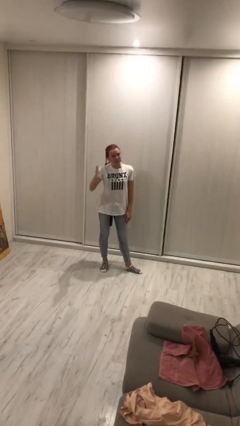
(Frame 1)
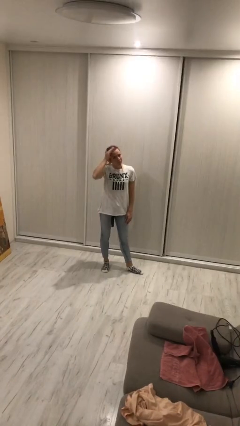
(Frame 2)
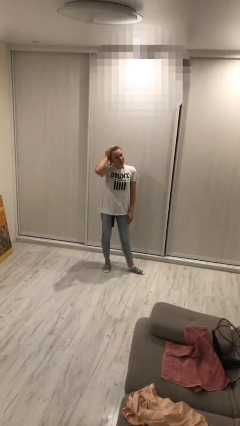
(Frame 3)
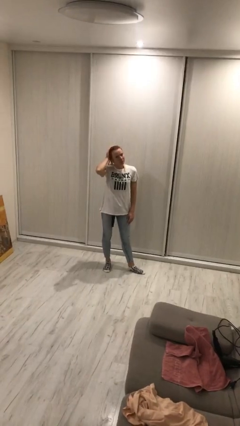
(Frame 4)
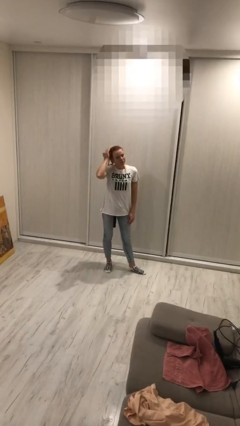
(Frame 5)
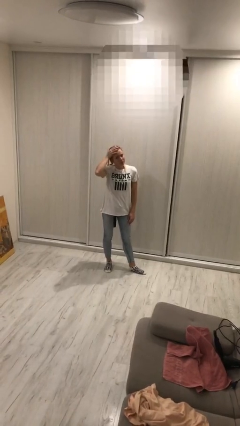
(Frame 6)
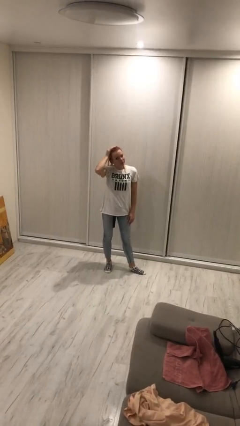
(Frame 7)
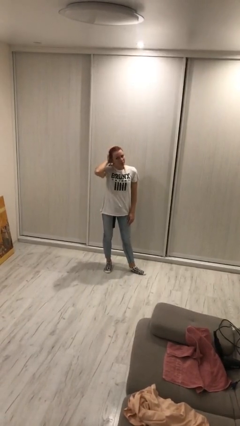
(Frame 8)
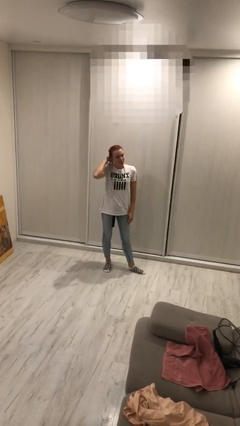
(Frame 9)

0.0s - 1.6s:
person pats head

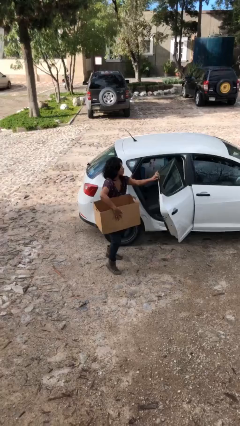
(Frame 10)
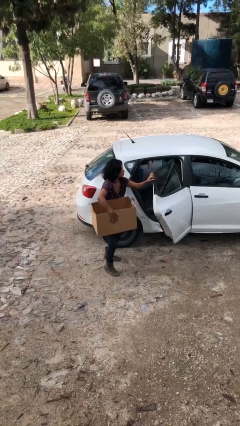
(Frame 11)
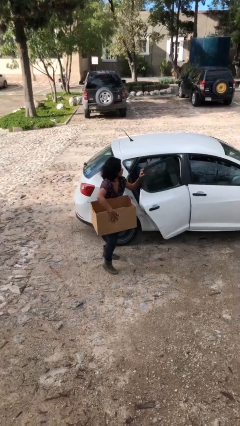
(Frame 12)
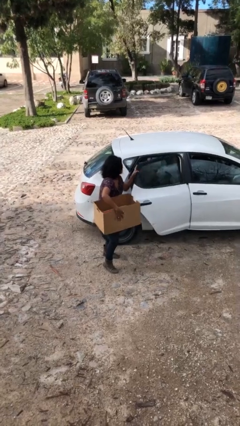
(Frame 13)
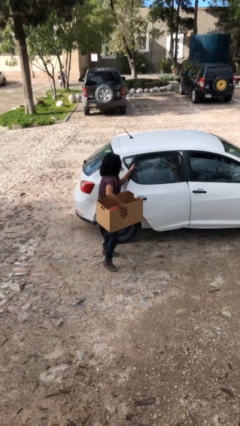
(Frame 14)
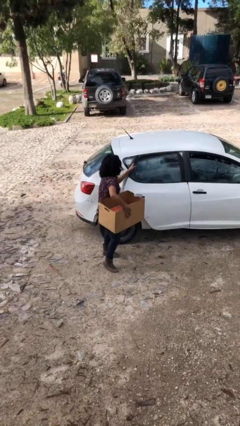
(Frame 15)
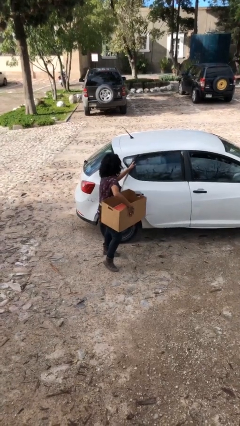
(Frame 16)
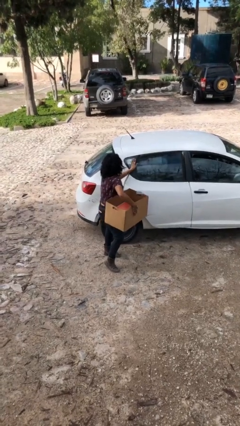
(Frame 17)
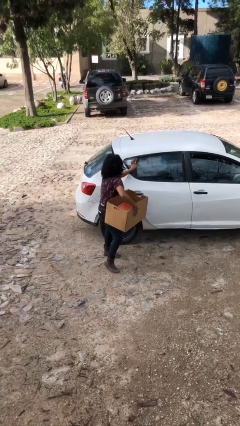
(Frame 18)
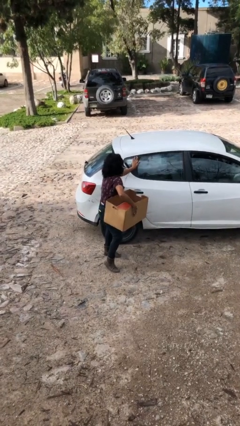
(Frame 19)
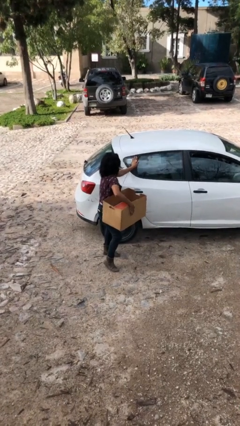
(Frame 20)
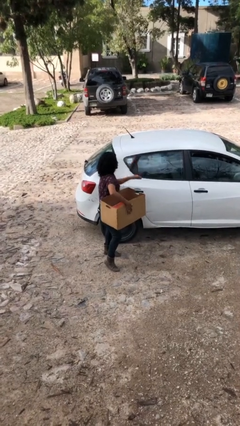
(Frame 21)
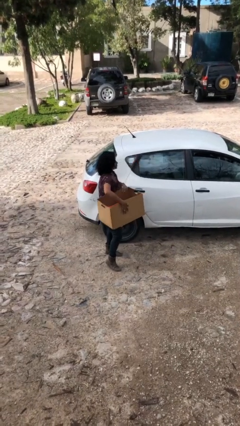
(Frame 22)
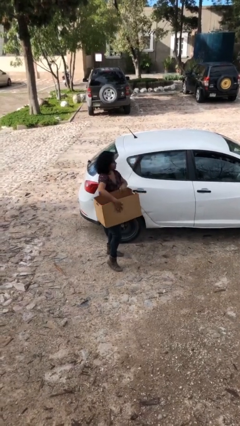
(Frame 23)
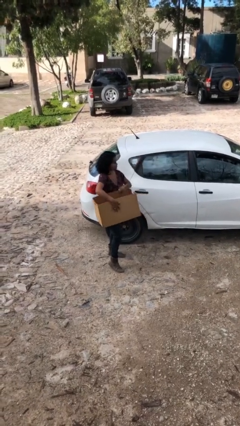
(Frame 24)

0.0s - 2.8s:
person closes car door

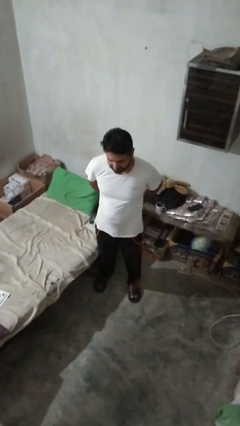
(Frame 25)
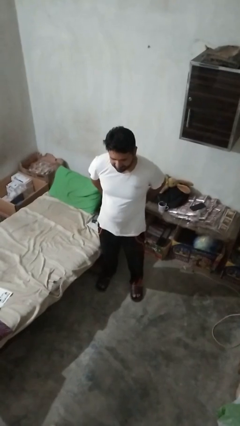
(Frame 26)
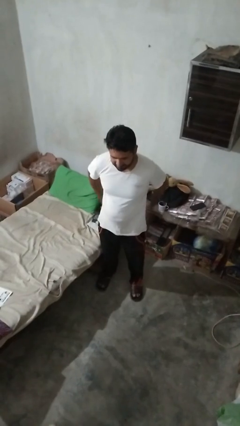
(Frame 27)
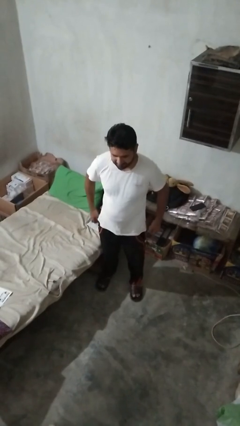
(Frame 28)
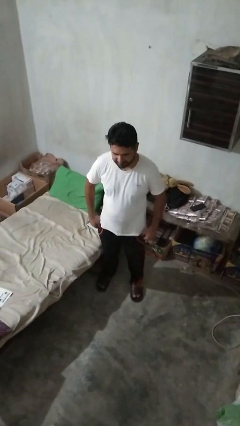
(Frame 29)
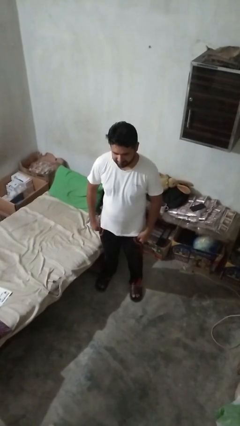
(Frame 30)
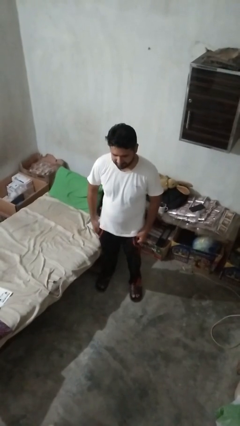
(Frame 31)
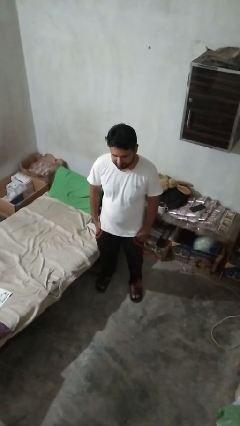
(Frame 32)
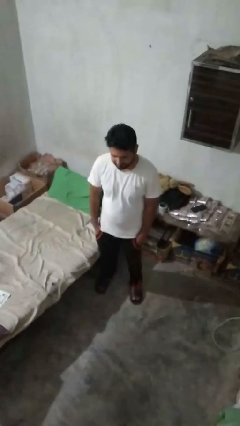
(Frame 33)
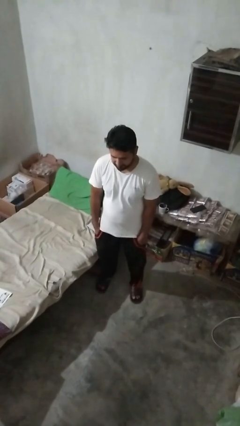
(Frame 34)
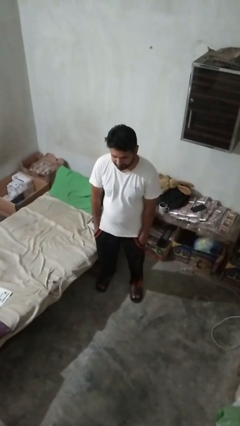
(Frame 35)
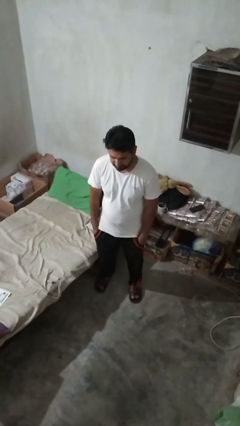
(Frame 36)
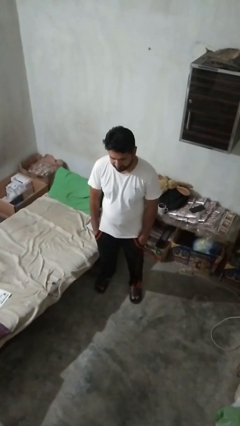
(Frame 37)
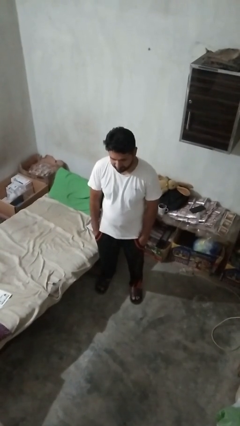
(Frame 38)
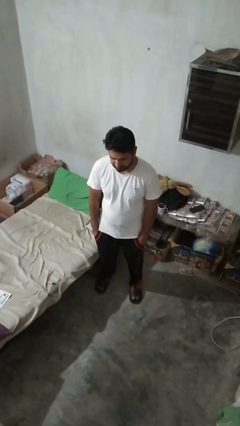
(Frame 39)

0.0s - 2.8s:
person puts hands in back pockets

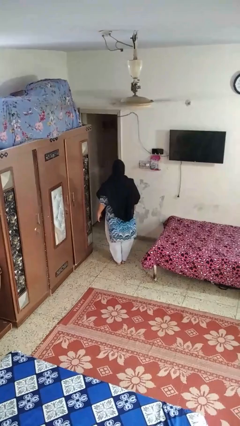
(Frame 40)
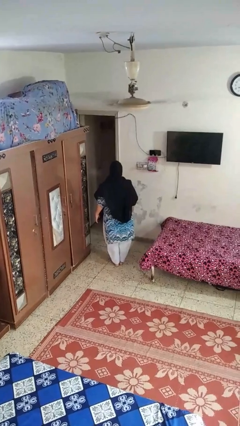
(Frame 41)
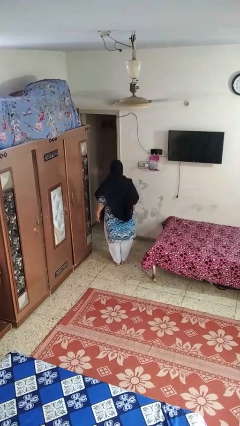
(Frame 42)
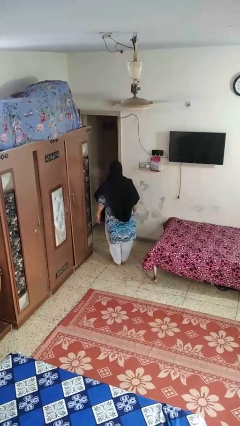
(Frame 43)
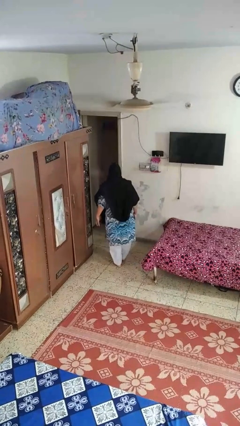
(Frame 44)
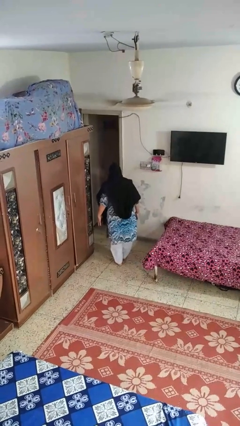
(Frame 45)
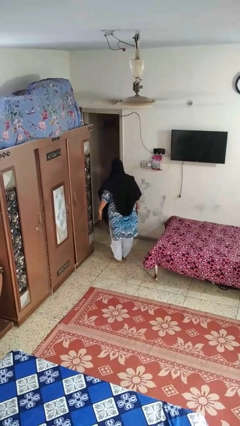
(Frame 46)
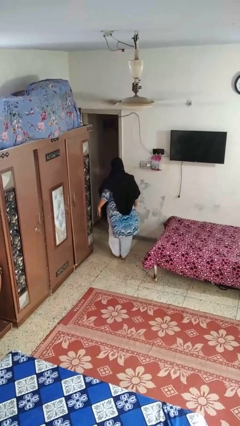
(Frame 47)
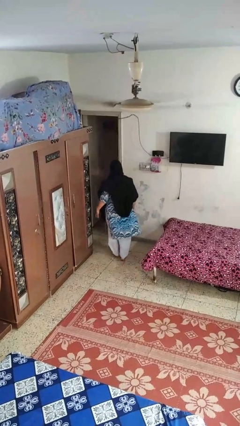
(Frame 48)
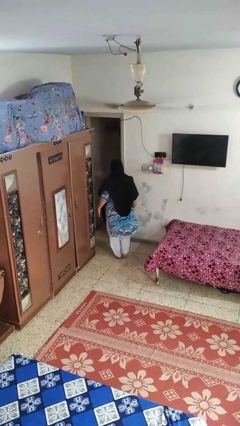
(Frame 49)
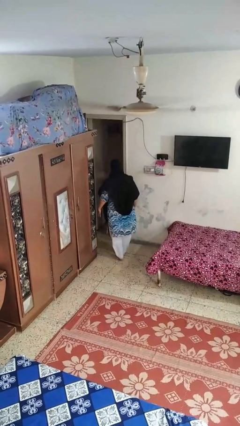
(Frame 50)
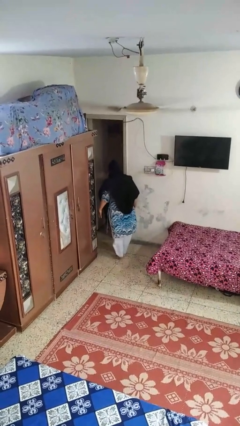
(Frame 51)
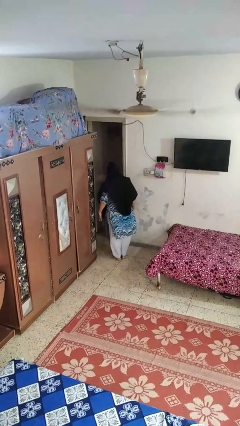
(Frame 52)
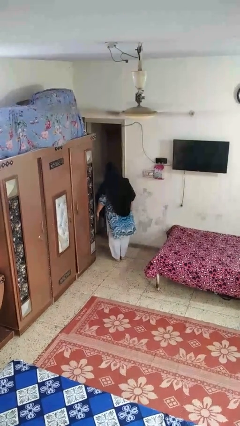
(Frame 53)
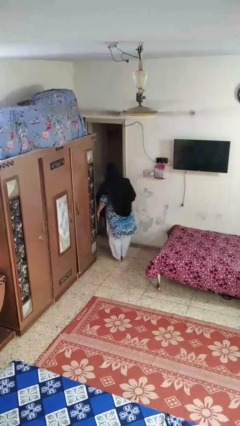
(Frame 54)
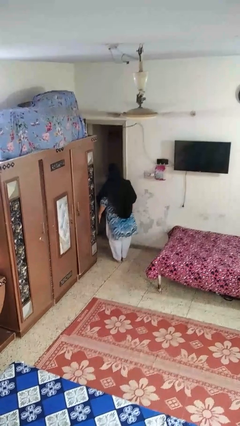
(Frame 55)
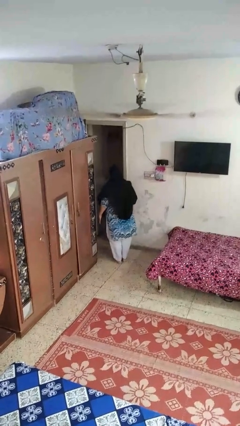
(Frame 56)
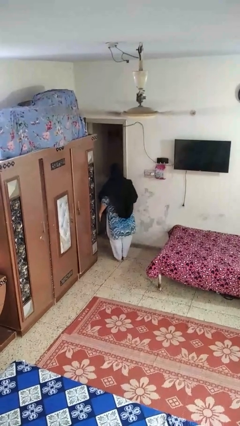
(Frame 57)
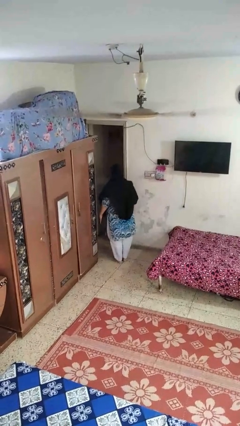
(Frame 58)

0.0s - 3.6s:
person walks tiptoe

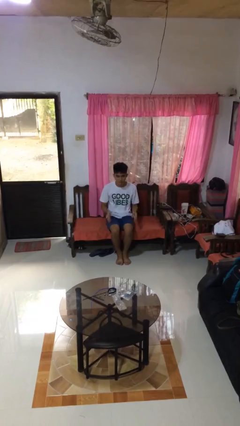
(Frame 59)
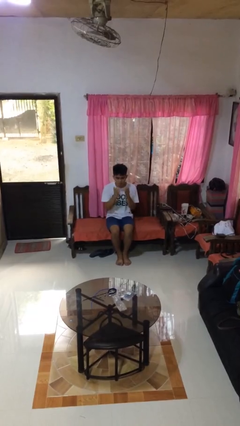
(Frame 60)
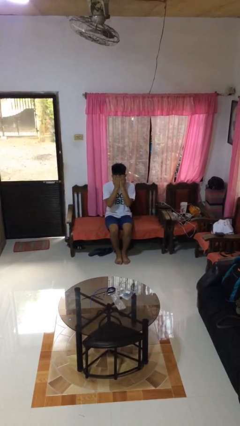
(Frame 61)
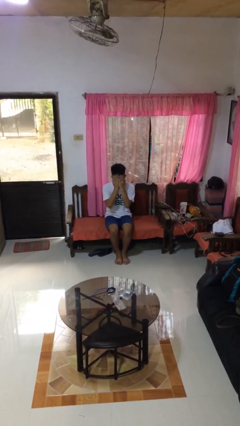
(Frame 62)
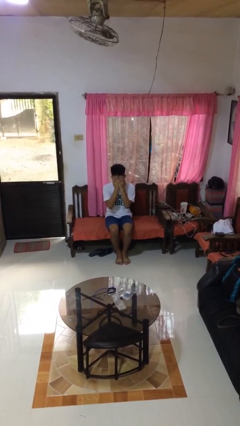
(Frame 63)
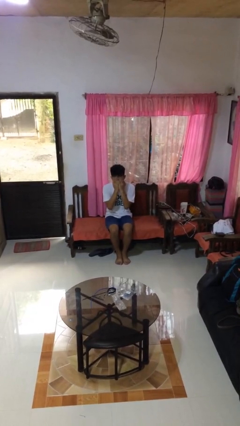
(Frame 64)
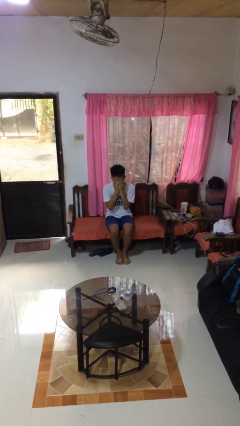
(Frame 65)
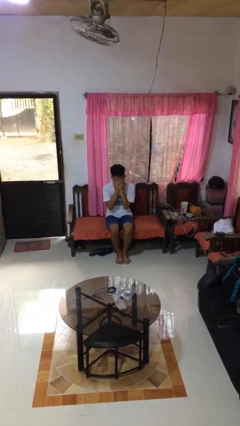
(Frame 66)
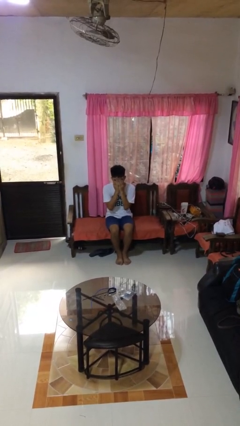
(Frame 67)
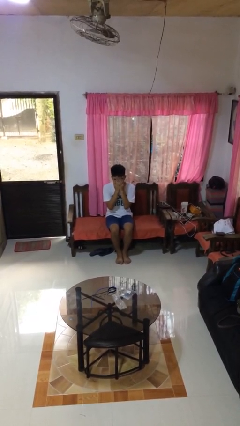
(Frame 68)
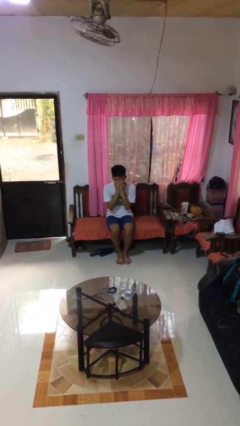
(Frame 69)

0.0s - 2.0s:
person covers face with hands

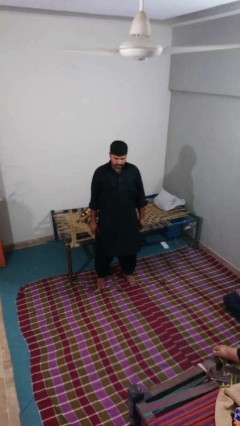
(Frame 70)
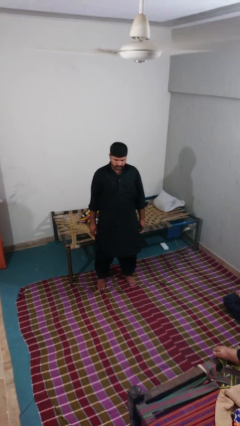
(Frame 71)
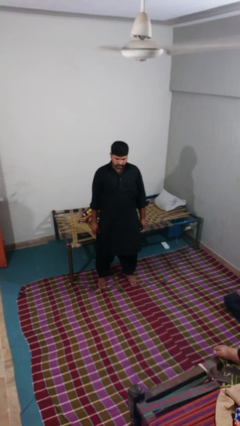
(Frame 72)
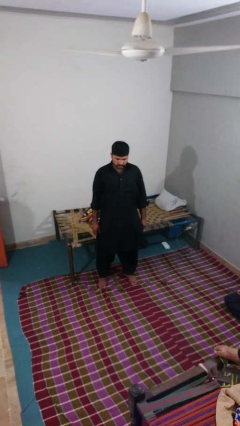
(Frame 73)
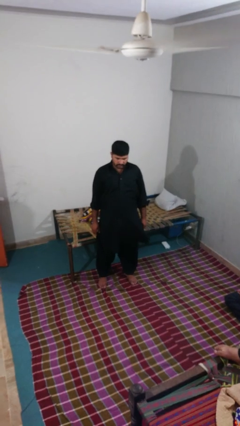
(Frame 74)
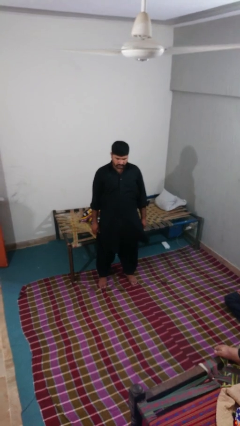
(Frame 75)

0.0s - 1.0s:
person gestures swipe left

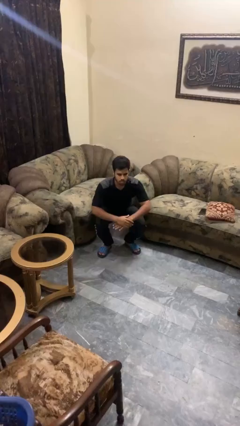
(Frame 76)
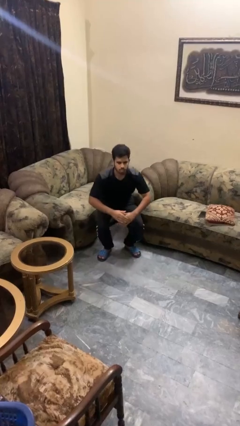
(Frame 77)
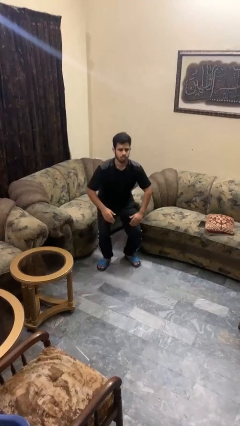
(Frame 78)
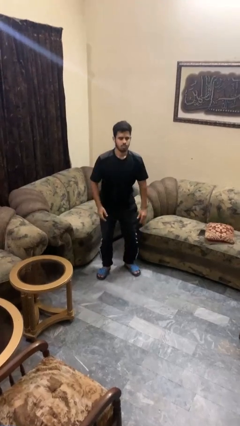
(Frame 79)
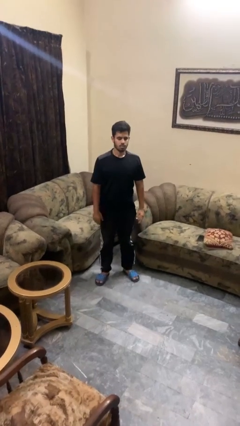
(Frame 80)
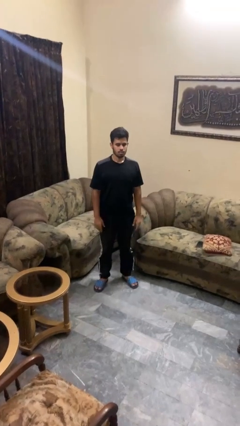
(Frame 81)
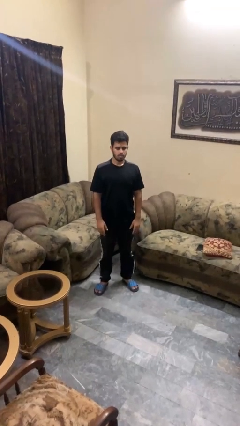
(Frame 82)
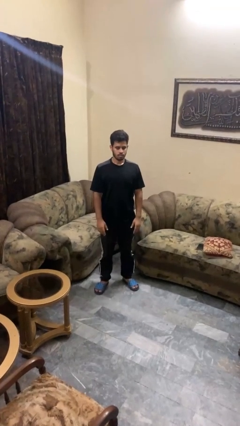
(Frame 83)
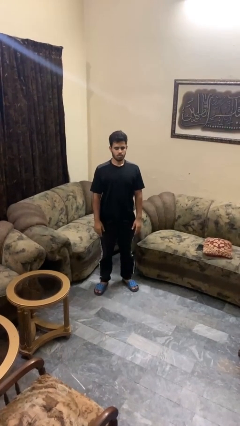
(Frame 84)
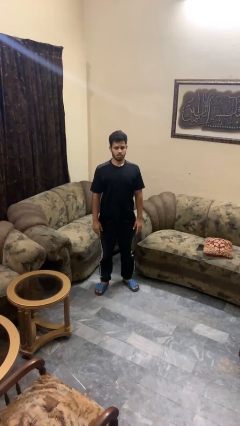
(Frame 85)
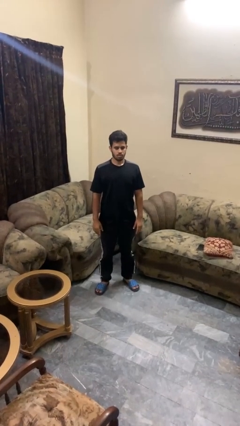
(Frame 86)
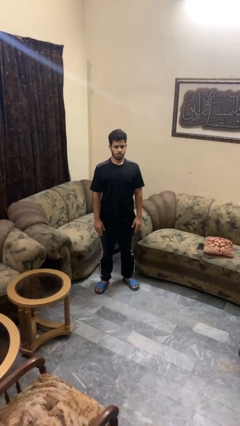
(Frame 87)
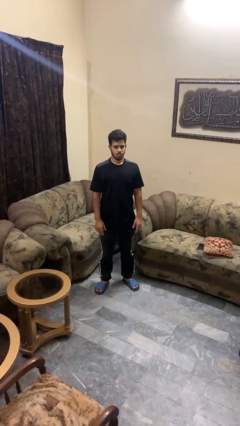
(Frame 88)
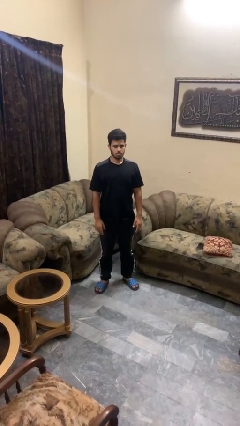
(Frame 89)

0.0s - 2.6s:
person stands up

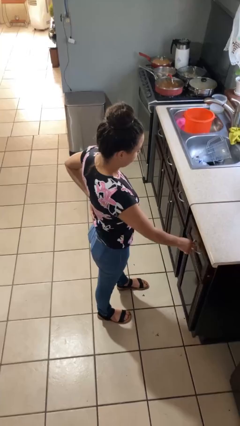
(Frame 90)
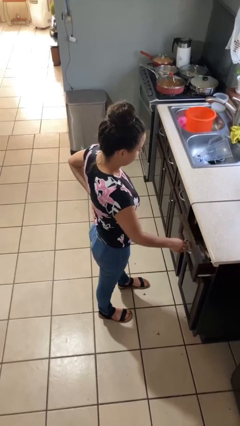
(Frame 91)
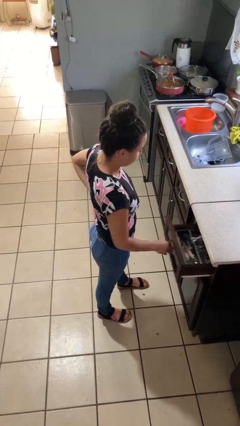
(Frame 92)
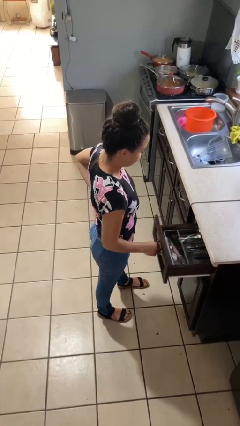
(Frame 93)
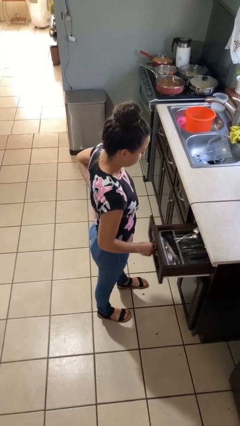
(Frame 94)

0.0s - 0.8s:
person opens kitchen drawer
